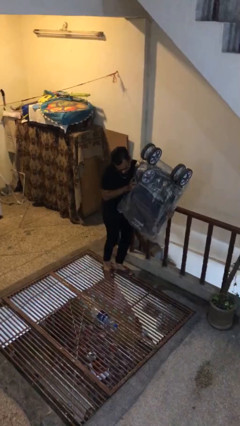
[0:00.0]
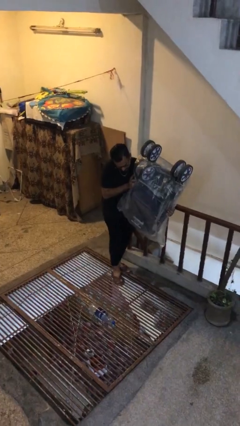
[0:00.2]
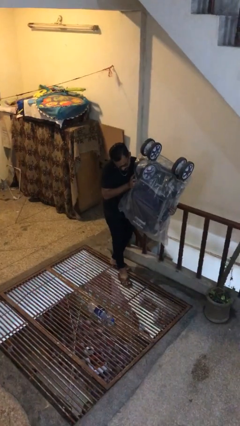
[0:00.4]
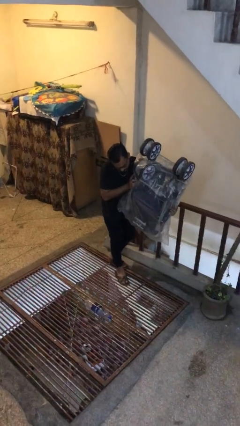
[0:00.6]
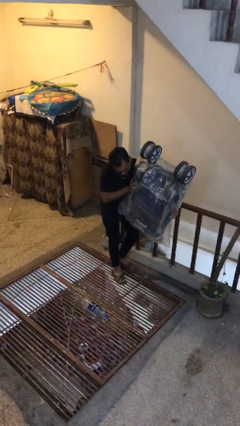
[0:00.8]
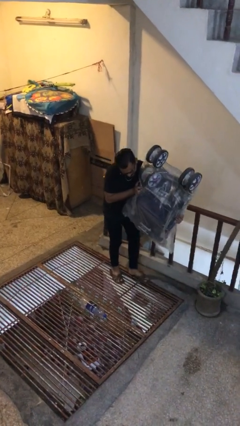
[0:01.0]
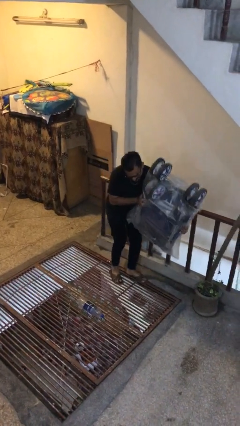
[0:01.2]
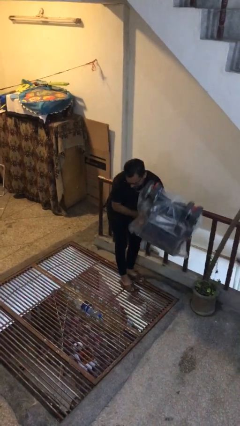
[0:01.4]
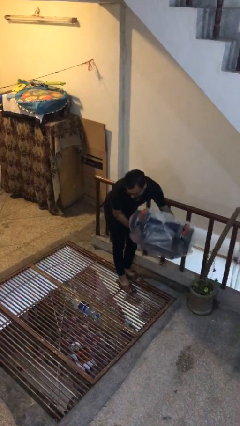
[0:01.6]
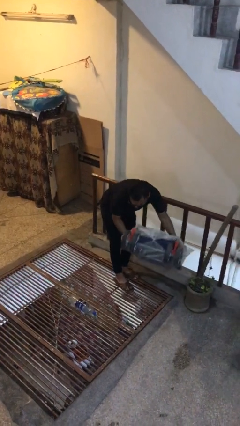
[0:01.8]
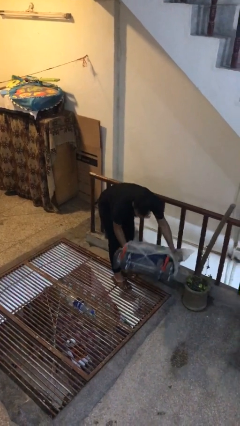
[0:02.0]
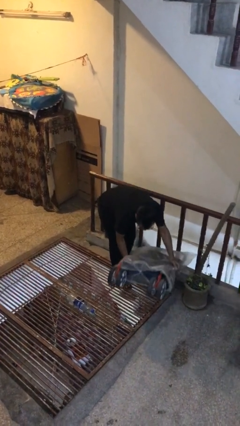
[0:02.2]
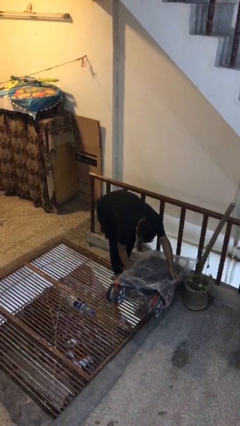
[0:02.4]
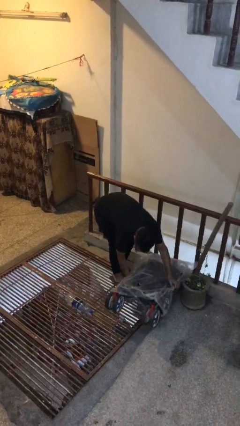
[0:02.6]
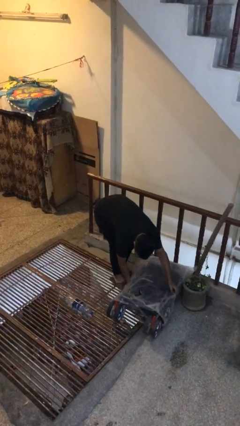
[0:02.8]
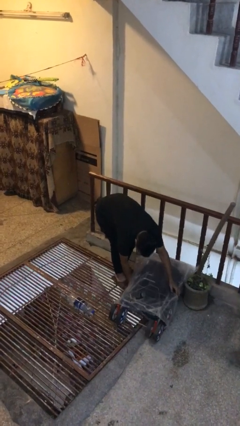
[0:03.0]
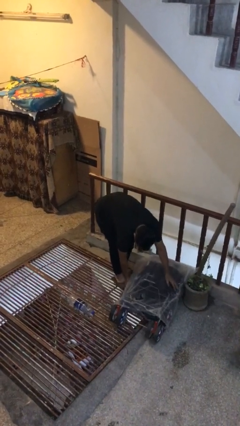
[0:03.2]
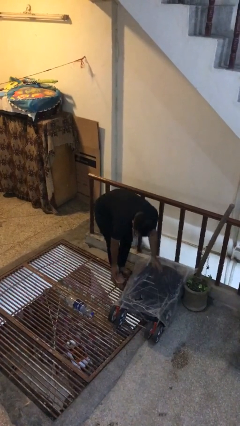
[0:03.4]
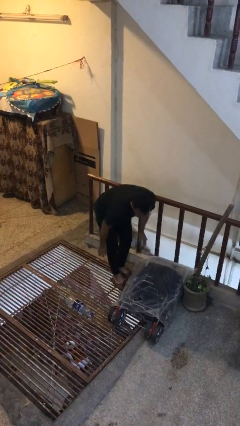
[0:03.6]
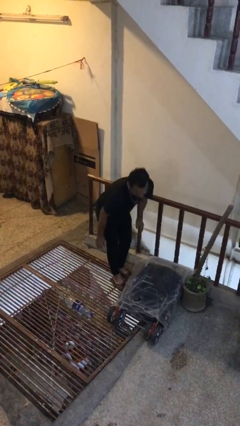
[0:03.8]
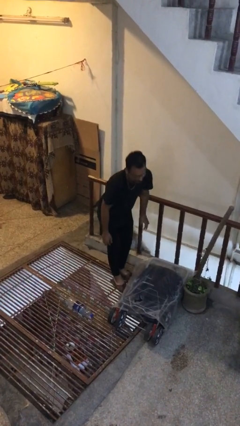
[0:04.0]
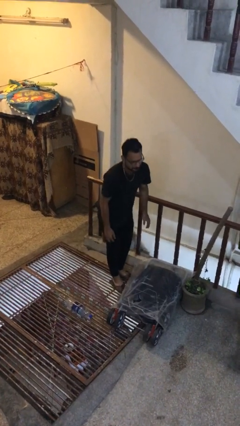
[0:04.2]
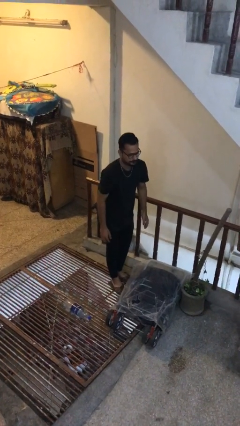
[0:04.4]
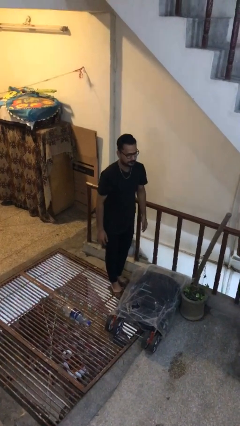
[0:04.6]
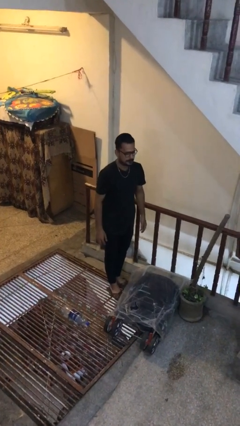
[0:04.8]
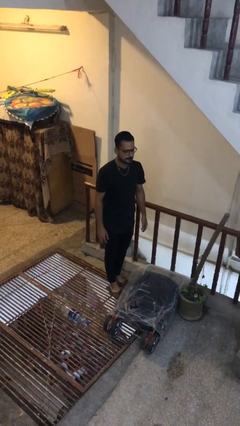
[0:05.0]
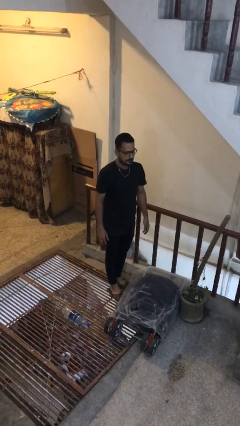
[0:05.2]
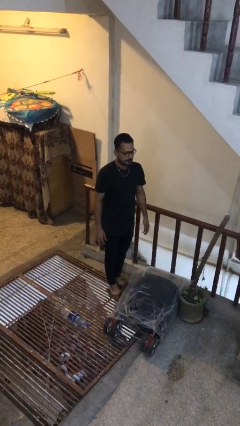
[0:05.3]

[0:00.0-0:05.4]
person puts down object on floor

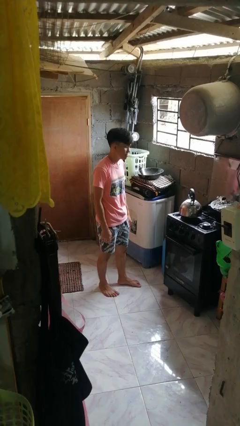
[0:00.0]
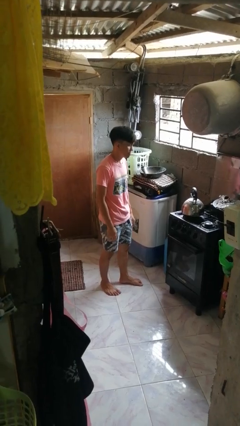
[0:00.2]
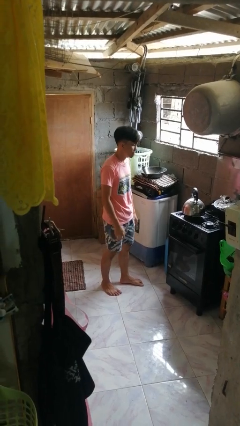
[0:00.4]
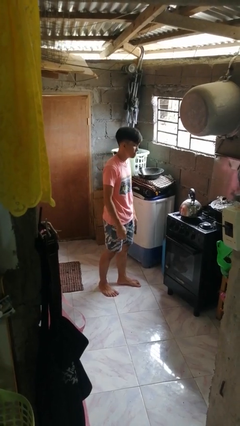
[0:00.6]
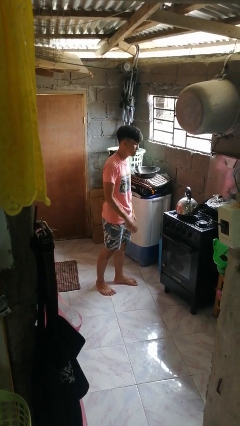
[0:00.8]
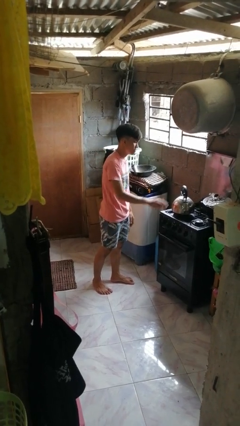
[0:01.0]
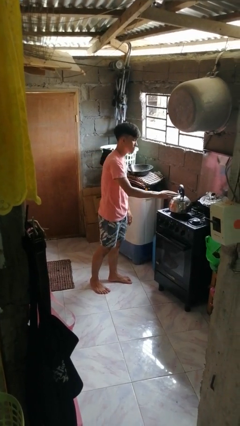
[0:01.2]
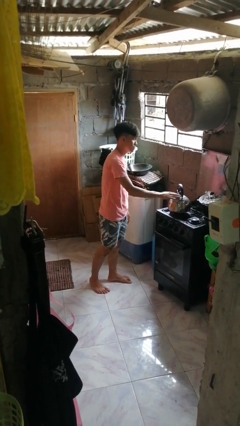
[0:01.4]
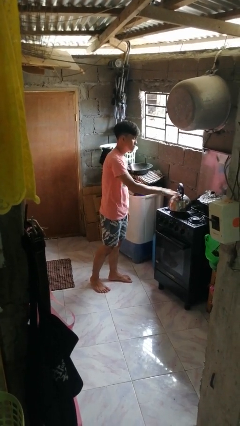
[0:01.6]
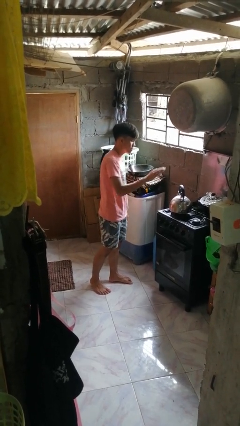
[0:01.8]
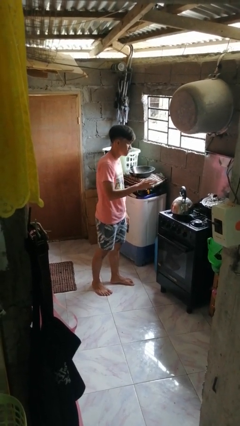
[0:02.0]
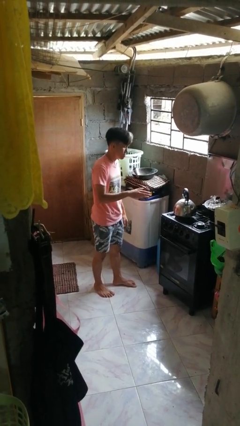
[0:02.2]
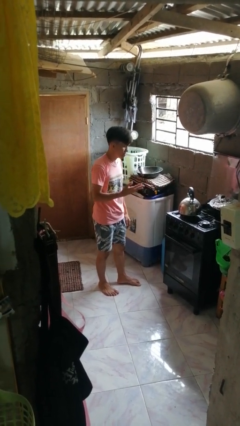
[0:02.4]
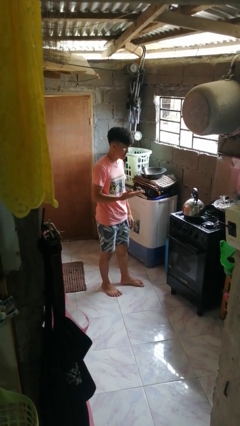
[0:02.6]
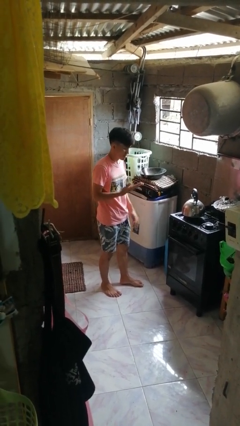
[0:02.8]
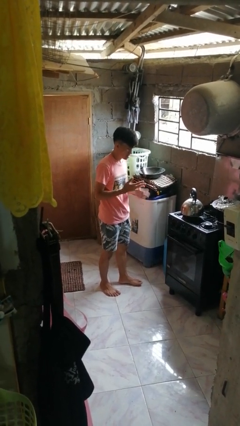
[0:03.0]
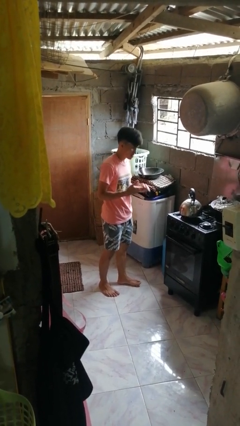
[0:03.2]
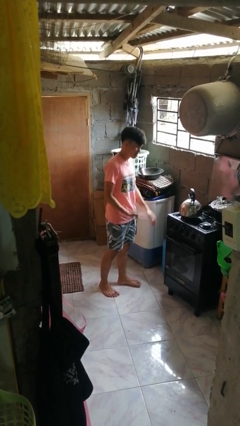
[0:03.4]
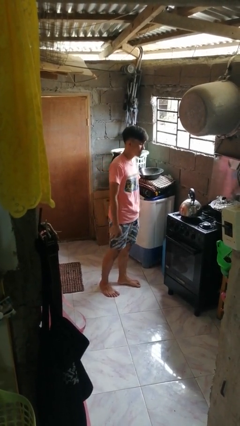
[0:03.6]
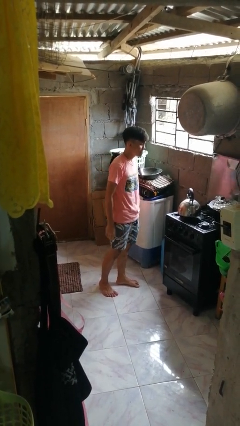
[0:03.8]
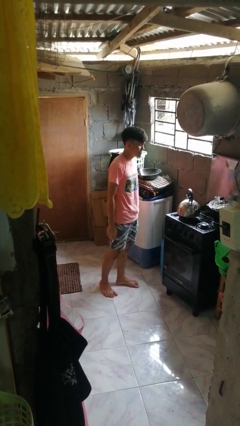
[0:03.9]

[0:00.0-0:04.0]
person burns hand

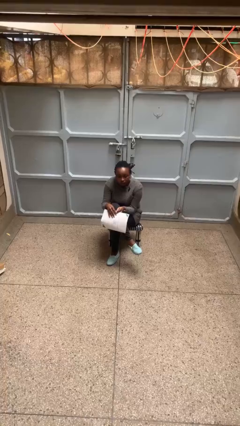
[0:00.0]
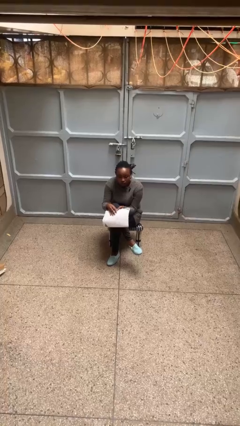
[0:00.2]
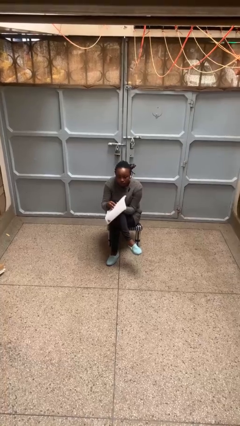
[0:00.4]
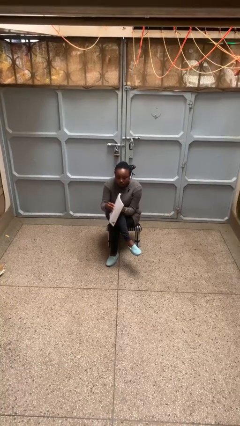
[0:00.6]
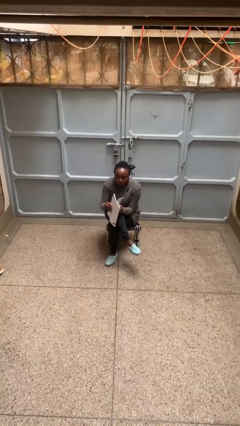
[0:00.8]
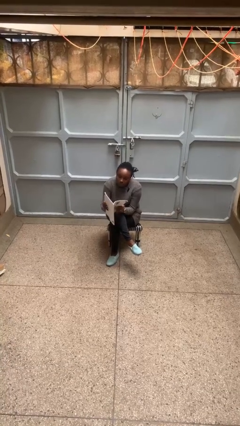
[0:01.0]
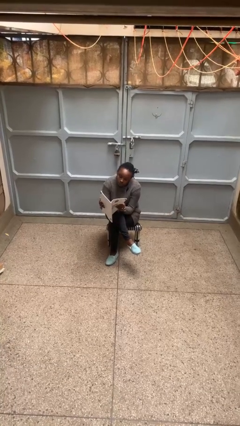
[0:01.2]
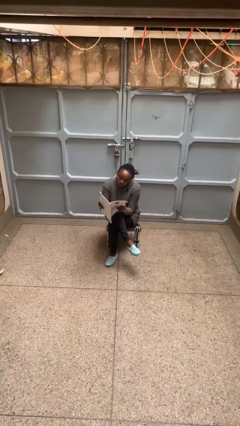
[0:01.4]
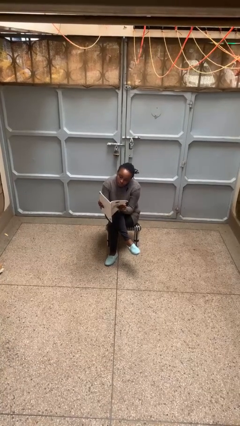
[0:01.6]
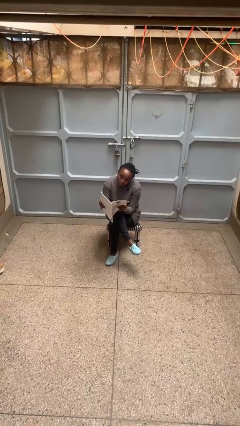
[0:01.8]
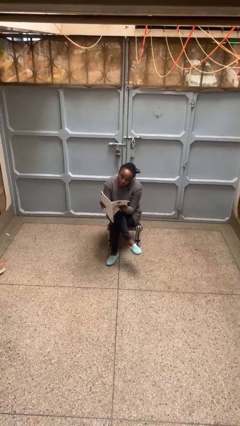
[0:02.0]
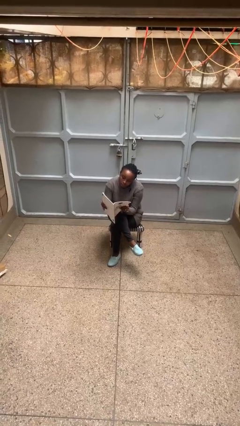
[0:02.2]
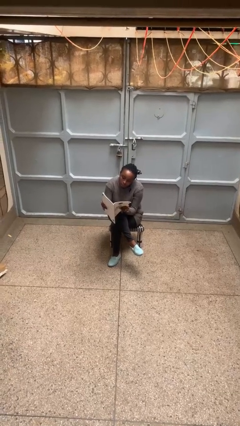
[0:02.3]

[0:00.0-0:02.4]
person reads magazine

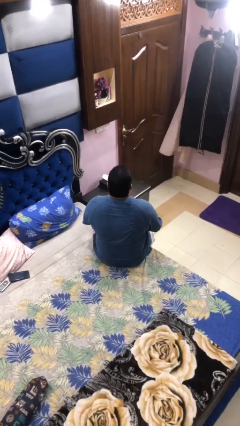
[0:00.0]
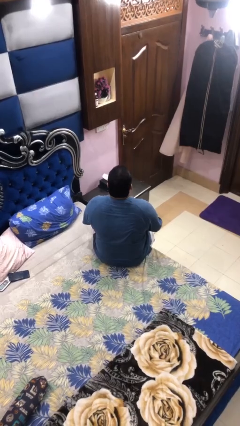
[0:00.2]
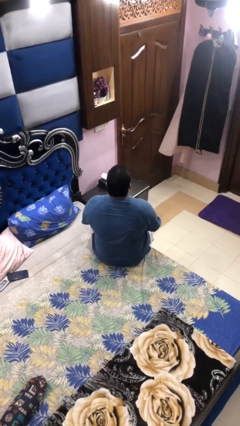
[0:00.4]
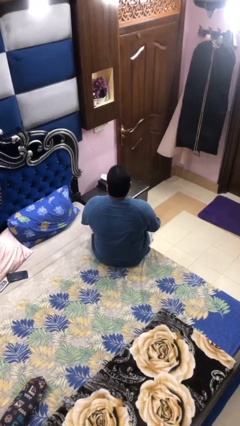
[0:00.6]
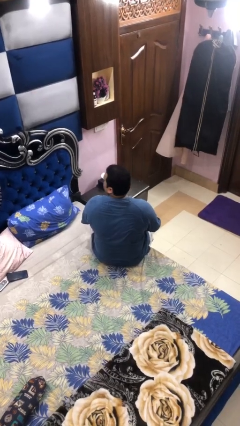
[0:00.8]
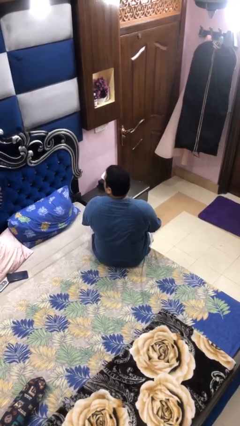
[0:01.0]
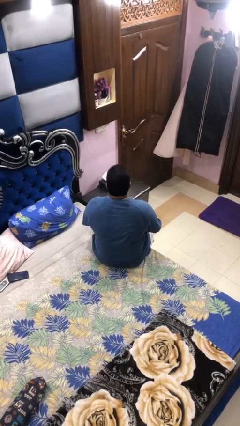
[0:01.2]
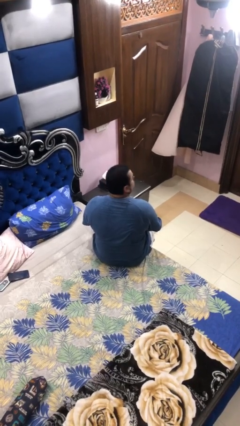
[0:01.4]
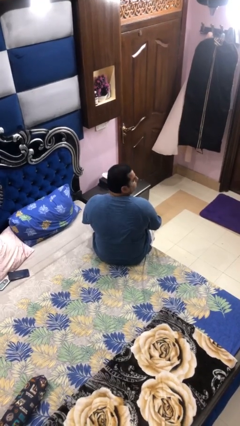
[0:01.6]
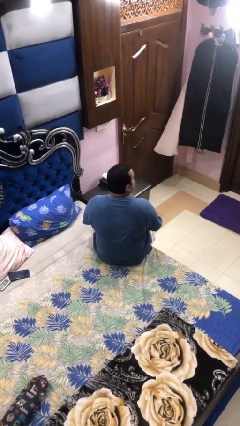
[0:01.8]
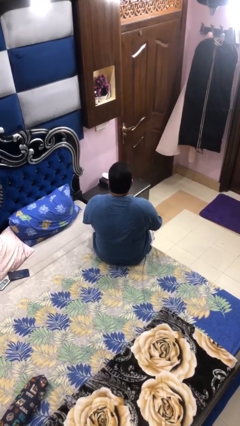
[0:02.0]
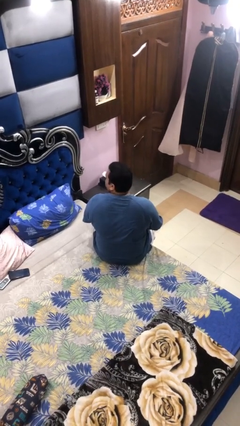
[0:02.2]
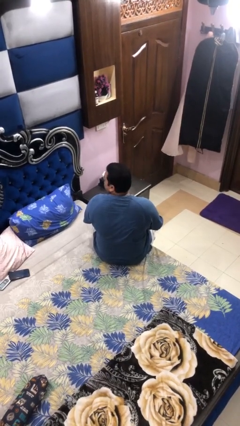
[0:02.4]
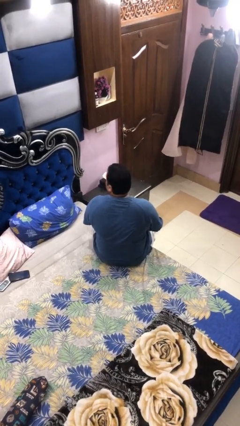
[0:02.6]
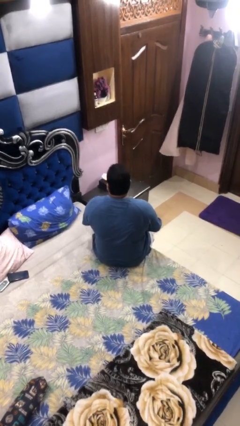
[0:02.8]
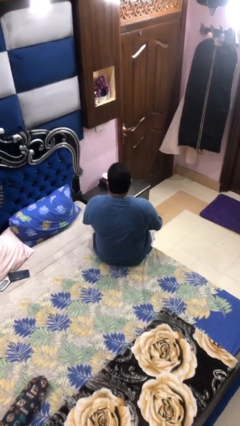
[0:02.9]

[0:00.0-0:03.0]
person shakes head

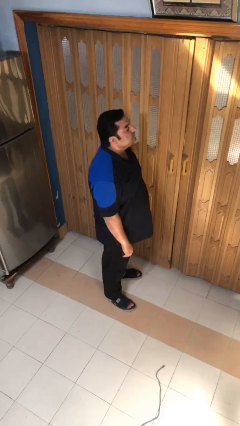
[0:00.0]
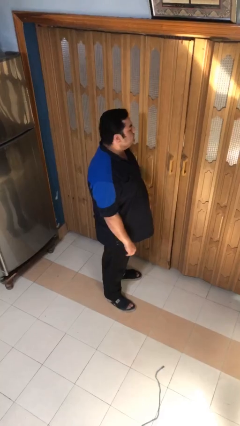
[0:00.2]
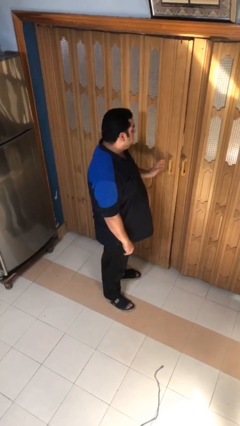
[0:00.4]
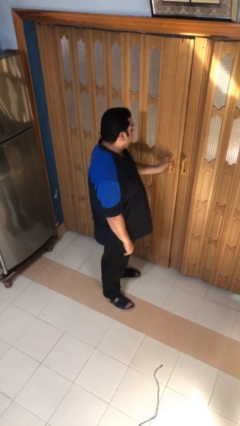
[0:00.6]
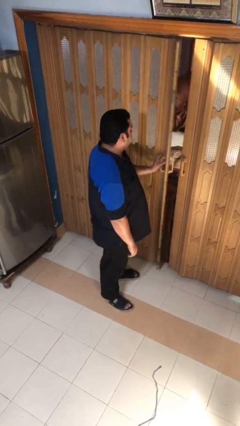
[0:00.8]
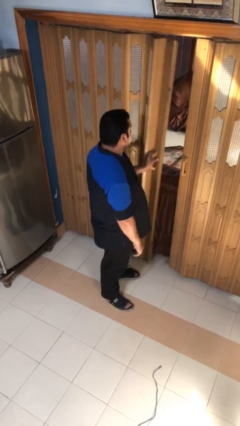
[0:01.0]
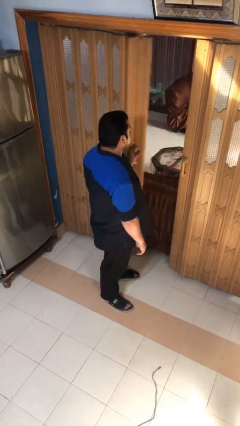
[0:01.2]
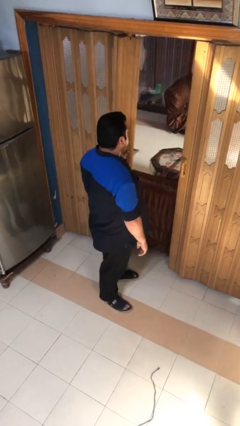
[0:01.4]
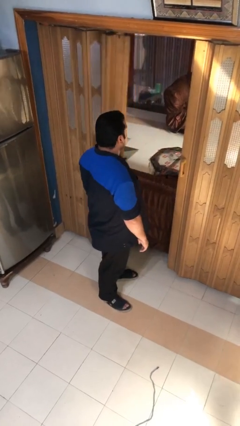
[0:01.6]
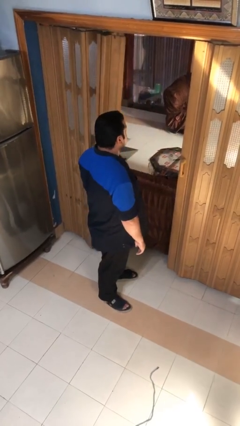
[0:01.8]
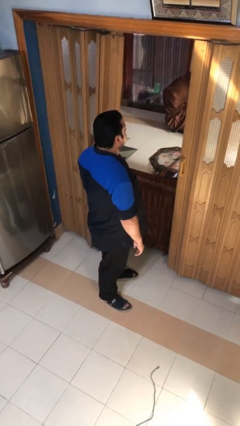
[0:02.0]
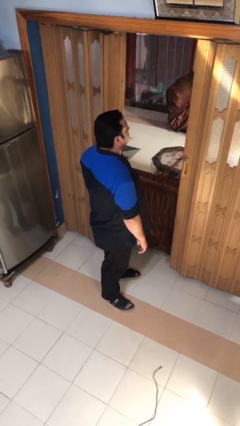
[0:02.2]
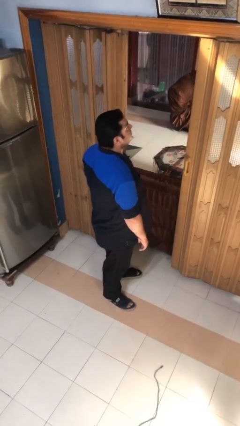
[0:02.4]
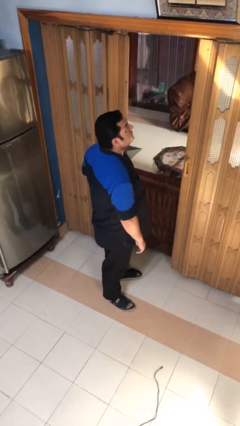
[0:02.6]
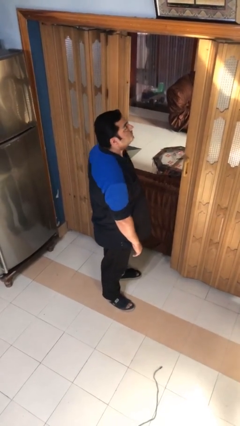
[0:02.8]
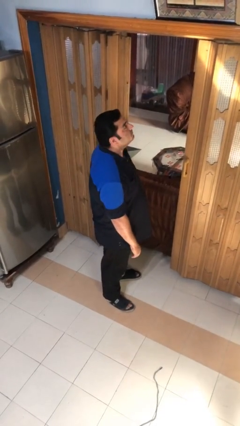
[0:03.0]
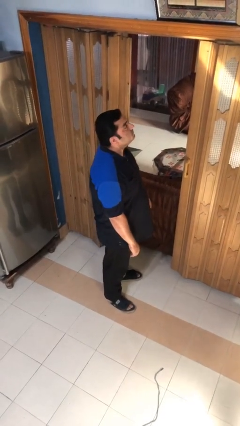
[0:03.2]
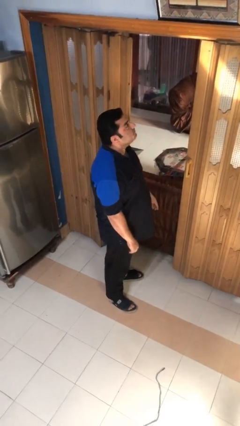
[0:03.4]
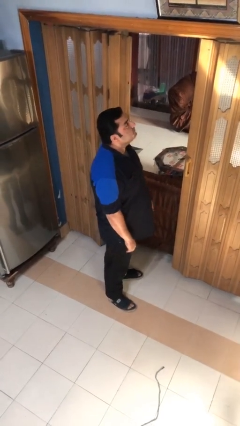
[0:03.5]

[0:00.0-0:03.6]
person opens sliding door
